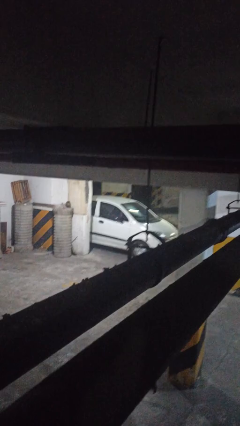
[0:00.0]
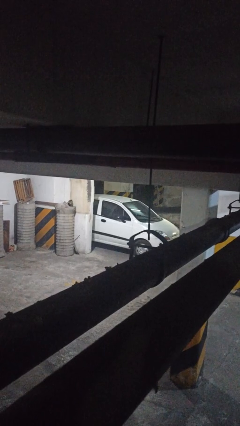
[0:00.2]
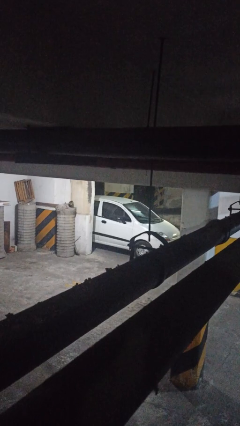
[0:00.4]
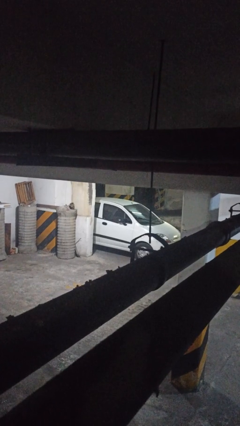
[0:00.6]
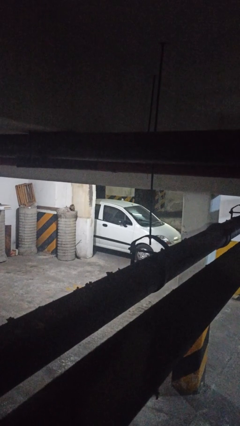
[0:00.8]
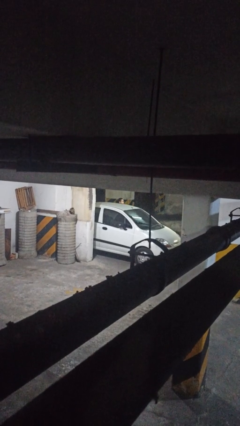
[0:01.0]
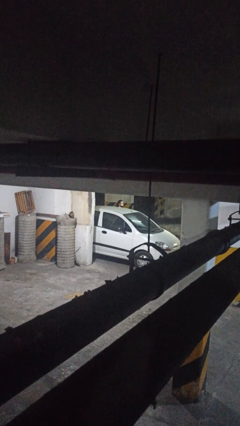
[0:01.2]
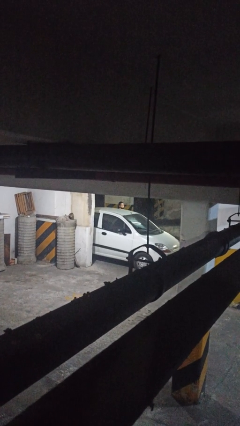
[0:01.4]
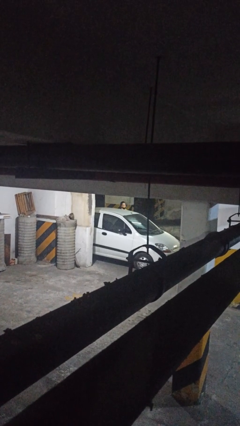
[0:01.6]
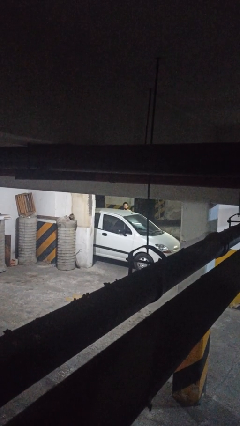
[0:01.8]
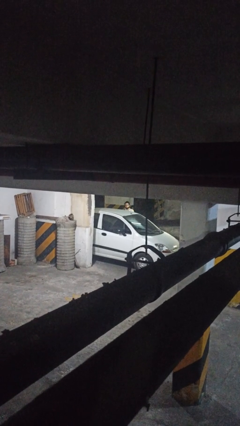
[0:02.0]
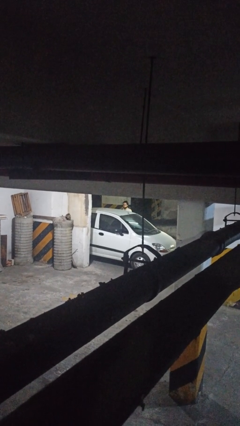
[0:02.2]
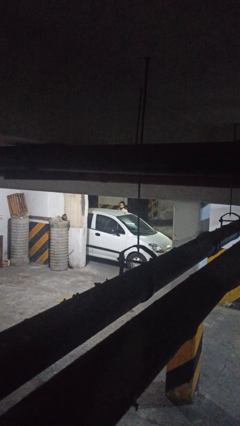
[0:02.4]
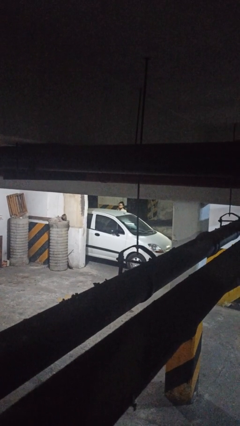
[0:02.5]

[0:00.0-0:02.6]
person exits car

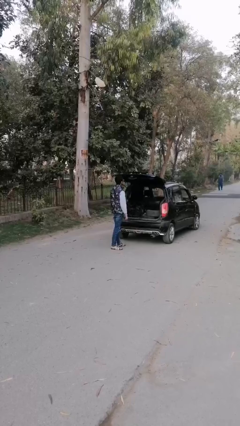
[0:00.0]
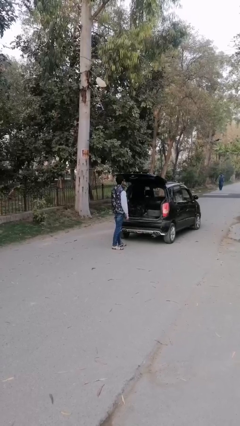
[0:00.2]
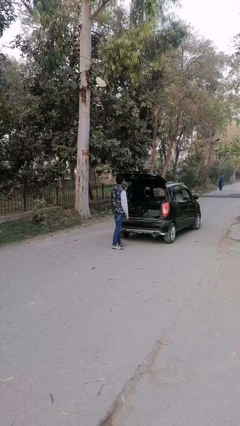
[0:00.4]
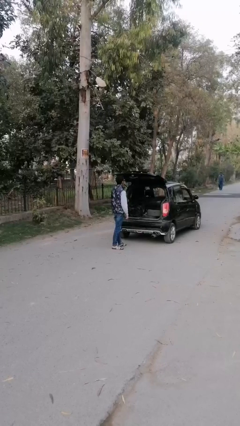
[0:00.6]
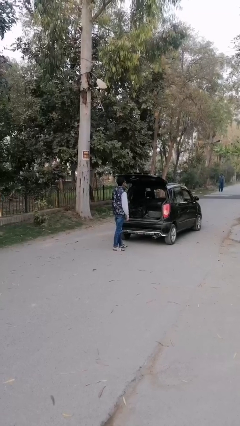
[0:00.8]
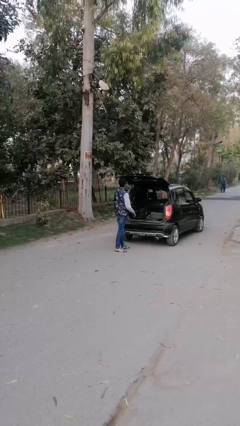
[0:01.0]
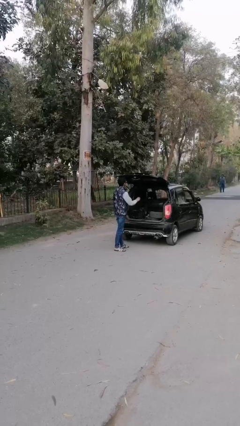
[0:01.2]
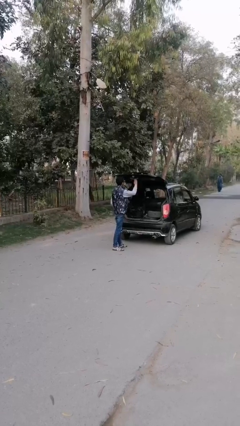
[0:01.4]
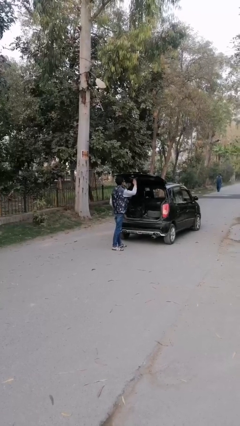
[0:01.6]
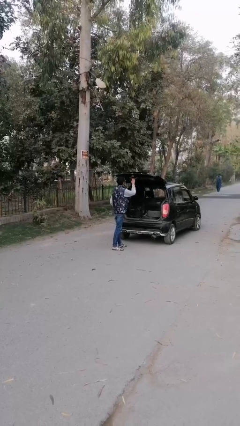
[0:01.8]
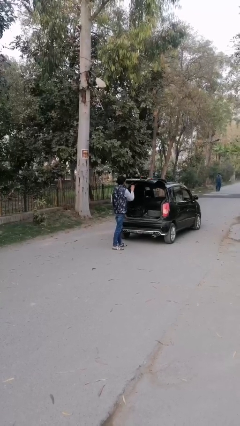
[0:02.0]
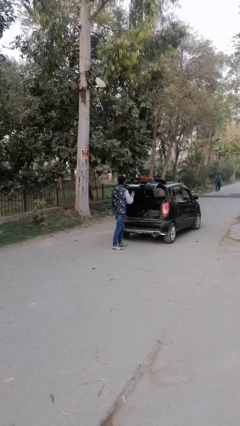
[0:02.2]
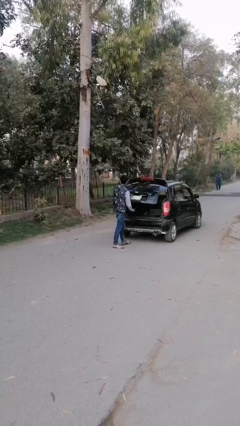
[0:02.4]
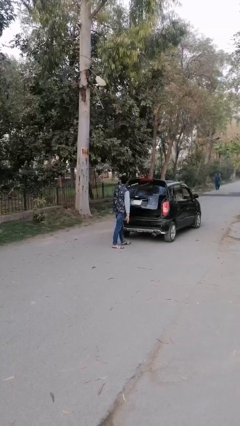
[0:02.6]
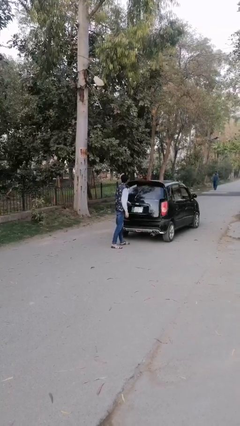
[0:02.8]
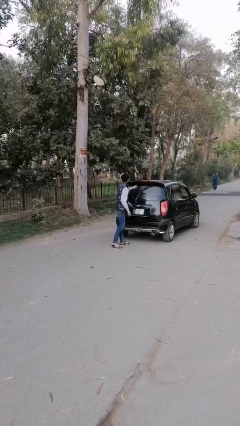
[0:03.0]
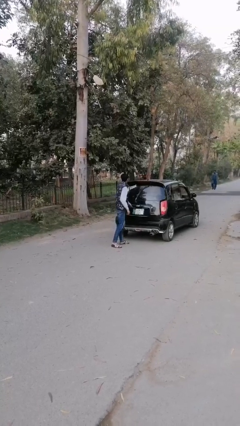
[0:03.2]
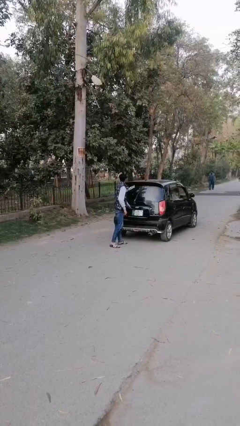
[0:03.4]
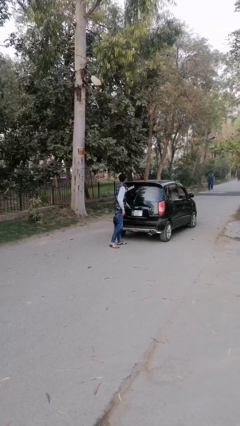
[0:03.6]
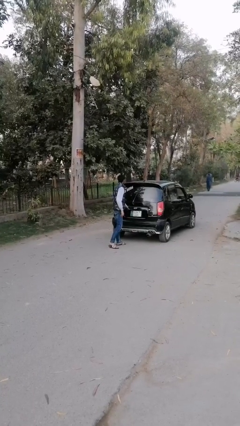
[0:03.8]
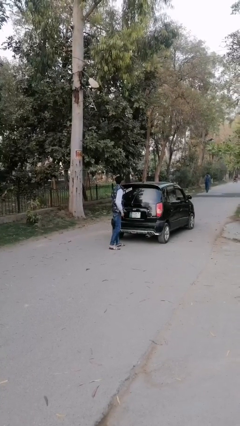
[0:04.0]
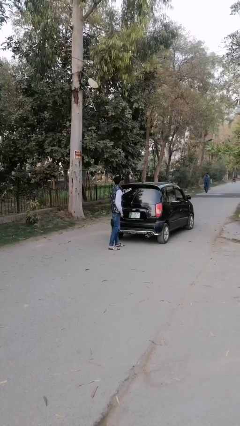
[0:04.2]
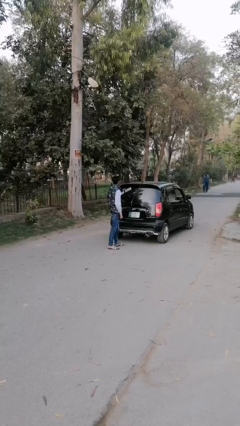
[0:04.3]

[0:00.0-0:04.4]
person opens car trunk

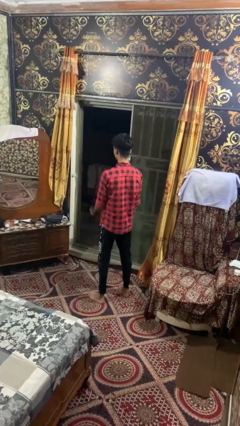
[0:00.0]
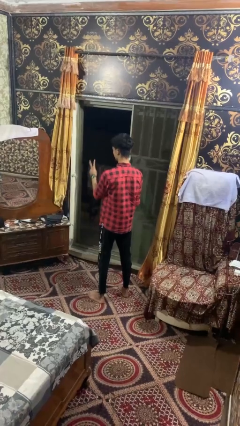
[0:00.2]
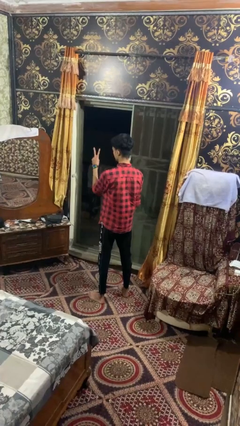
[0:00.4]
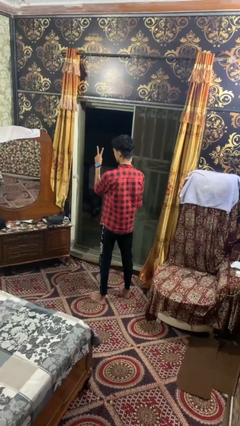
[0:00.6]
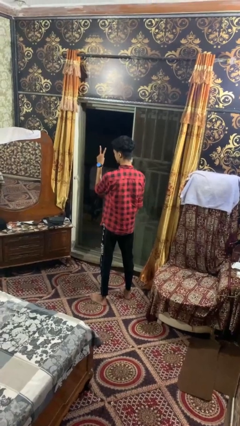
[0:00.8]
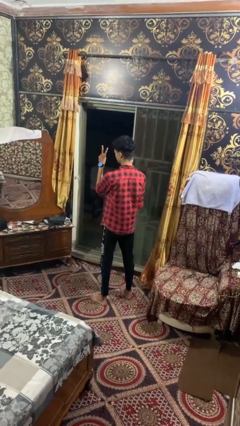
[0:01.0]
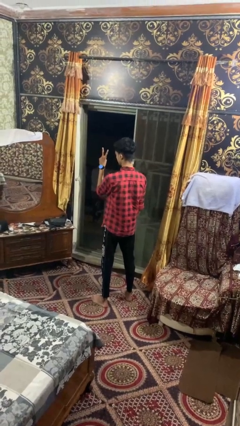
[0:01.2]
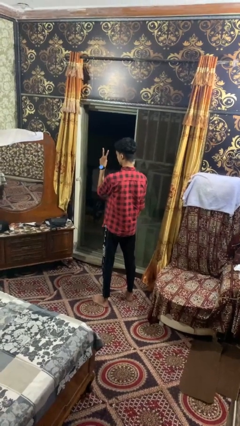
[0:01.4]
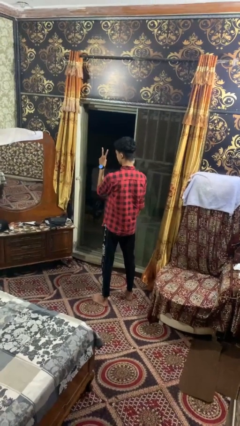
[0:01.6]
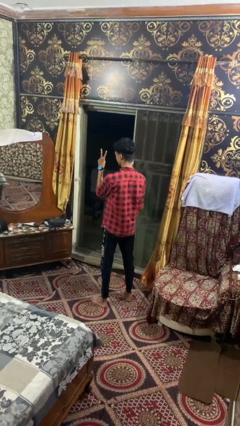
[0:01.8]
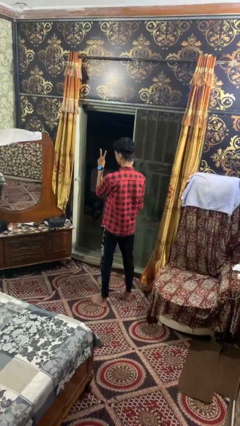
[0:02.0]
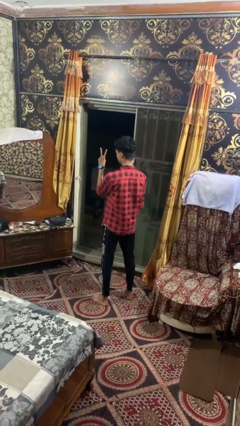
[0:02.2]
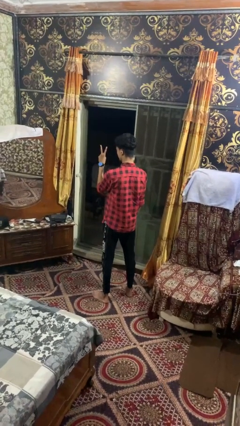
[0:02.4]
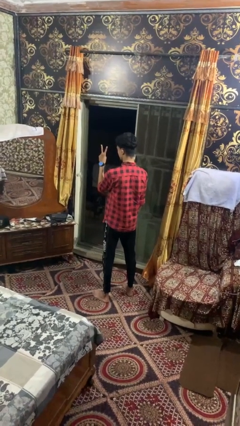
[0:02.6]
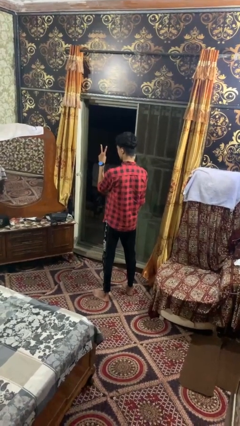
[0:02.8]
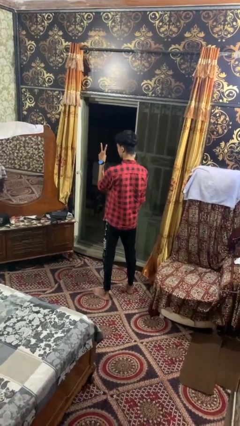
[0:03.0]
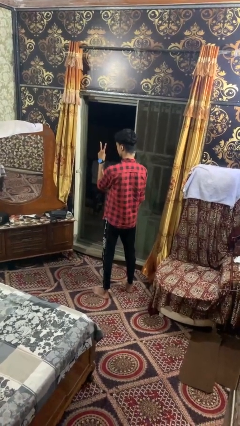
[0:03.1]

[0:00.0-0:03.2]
person gestures peace

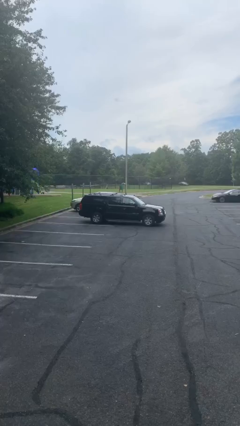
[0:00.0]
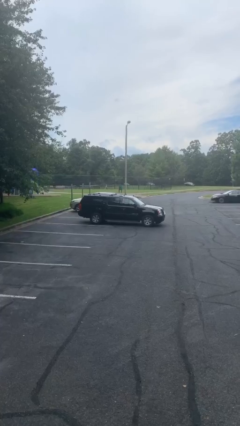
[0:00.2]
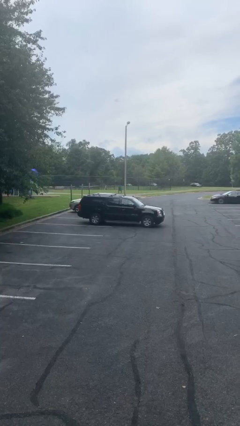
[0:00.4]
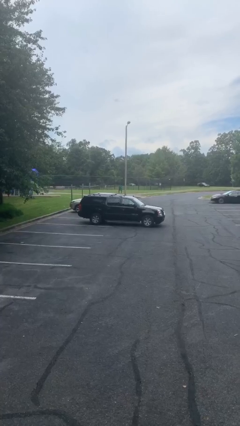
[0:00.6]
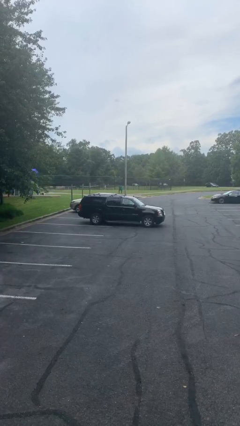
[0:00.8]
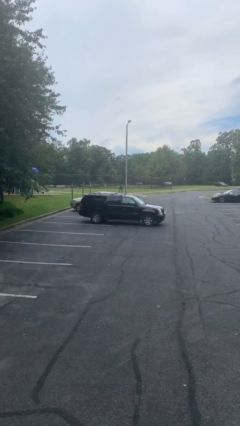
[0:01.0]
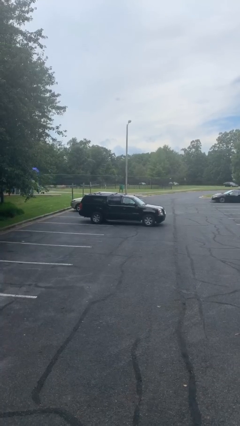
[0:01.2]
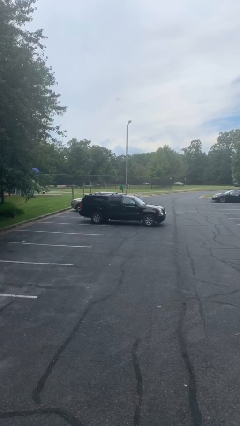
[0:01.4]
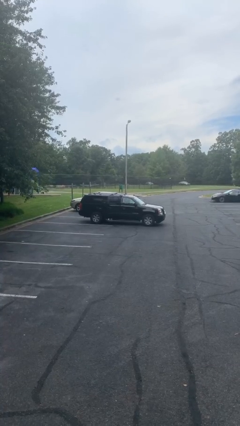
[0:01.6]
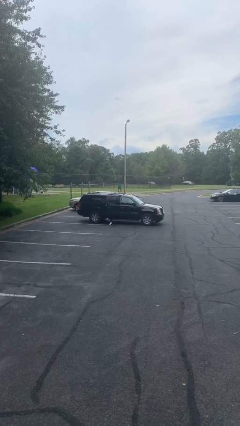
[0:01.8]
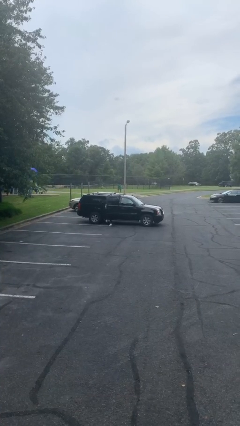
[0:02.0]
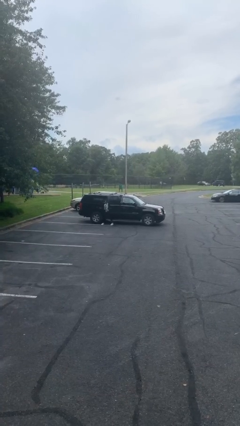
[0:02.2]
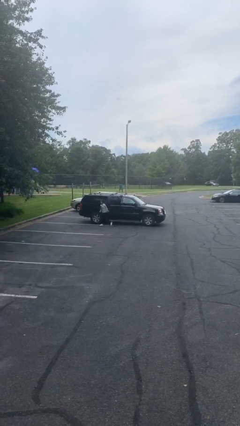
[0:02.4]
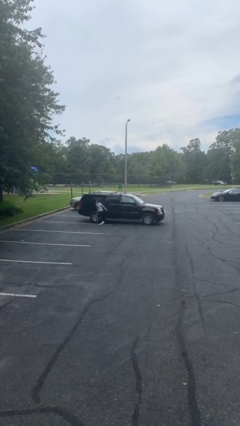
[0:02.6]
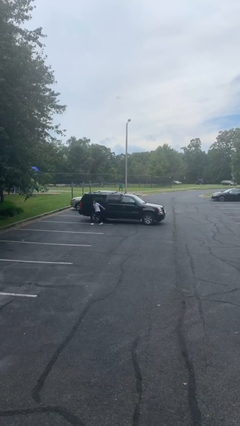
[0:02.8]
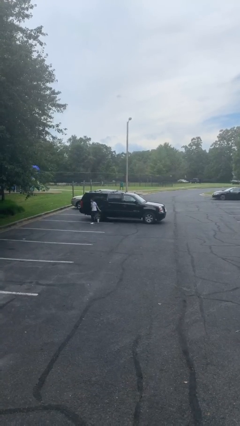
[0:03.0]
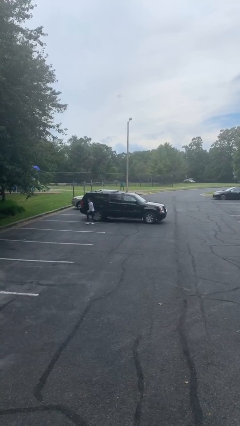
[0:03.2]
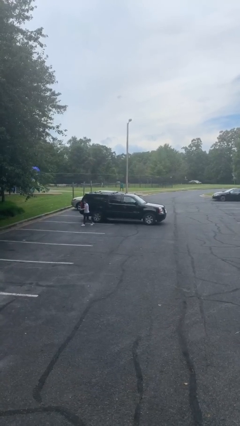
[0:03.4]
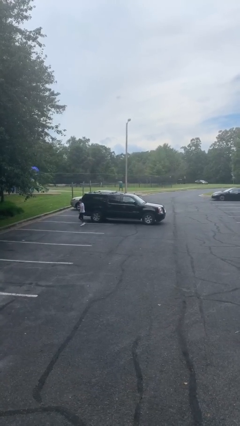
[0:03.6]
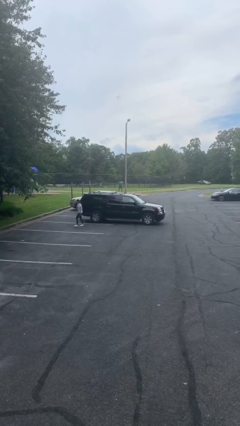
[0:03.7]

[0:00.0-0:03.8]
car drops off person

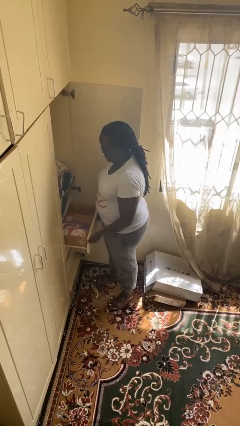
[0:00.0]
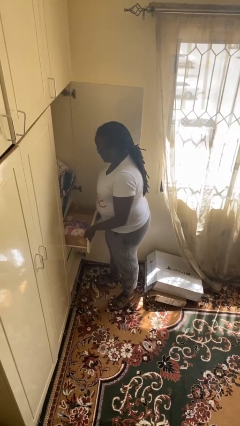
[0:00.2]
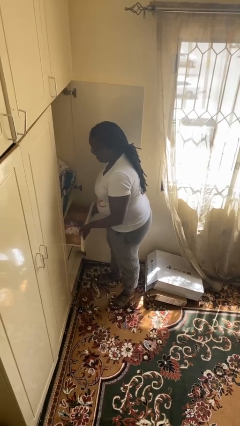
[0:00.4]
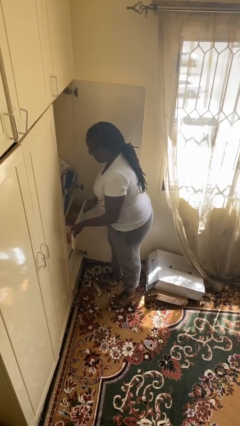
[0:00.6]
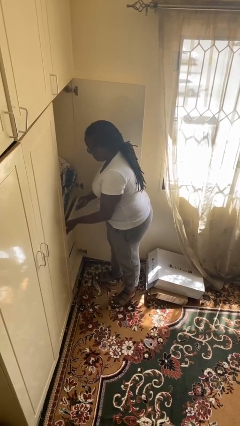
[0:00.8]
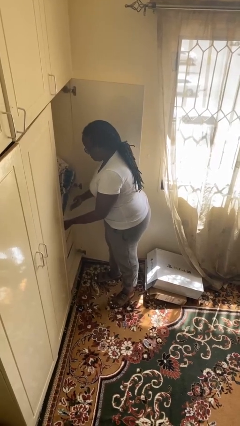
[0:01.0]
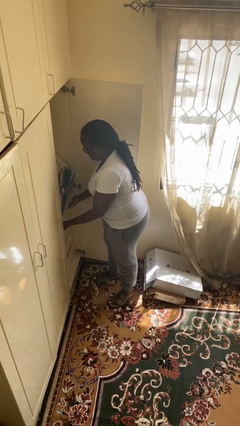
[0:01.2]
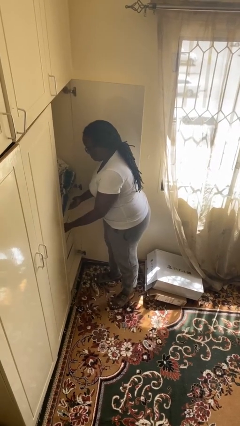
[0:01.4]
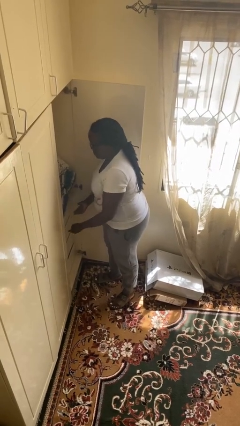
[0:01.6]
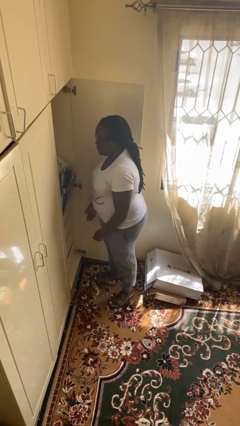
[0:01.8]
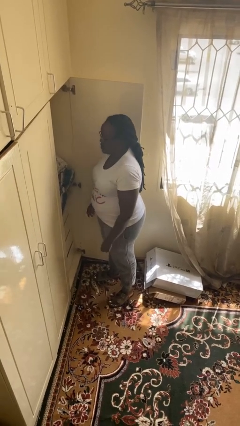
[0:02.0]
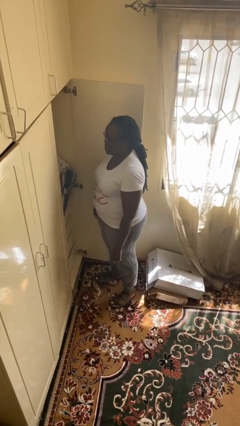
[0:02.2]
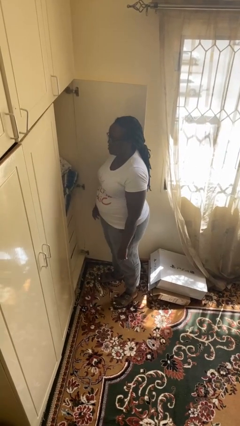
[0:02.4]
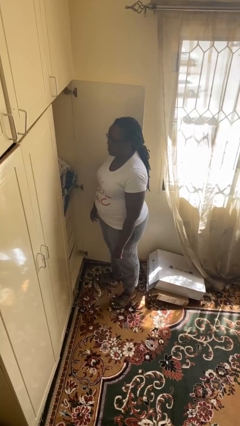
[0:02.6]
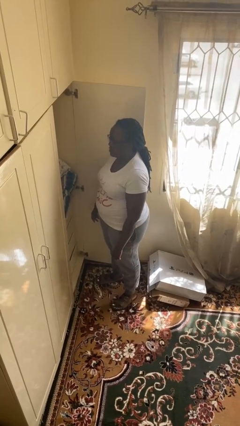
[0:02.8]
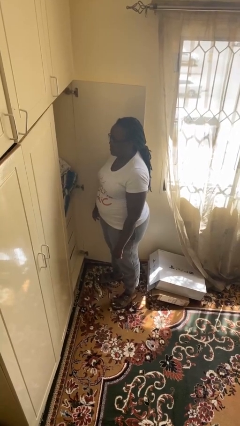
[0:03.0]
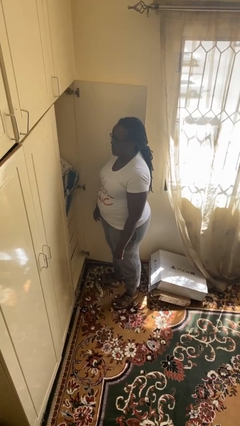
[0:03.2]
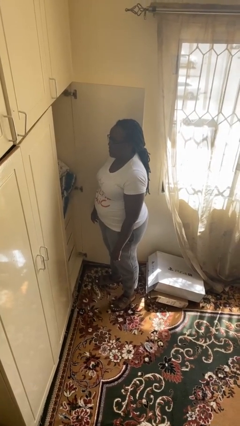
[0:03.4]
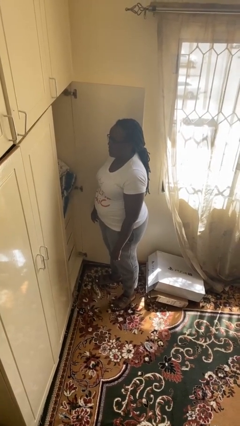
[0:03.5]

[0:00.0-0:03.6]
person closes dresser drawer

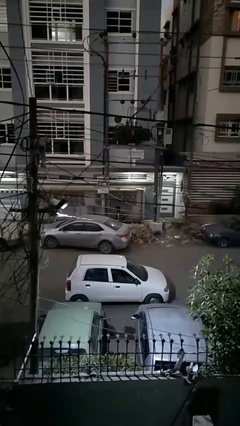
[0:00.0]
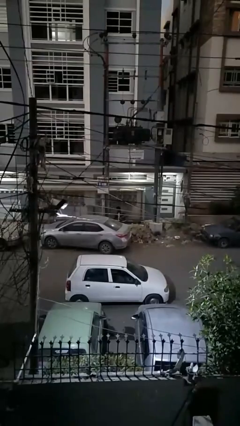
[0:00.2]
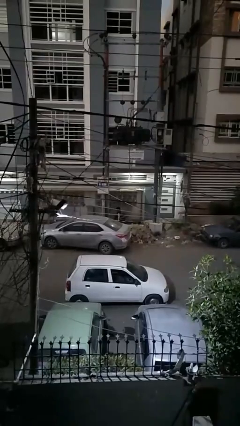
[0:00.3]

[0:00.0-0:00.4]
person unloads car
